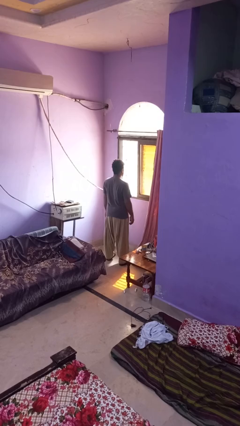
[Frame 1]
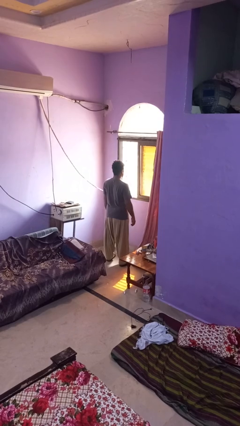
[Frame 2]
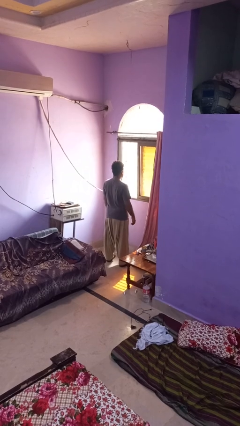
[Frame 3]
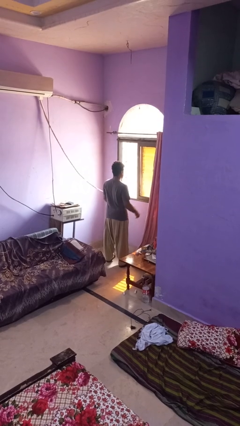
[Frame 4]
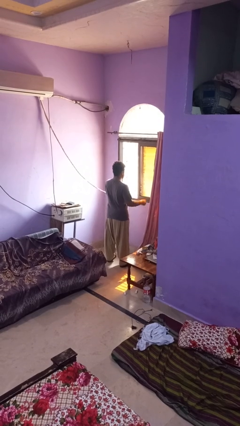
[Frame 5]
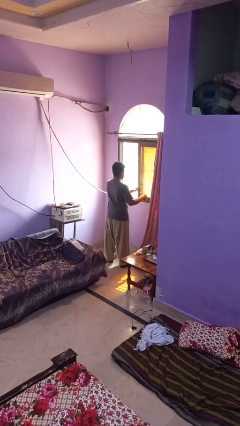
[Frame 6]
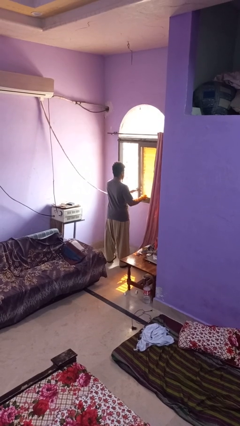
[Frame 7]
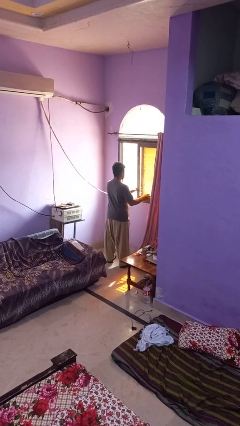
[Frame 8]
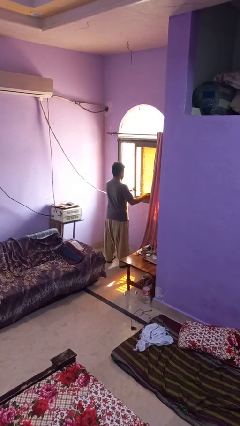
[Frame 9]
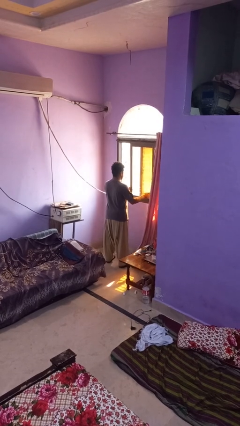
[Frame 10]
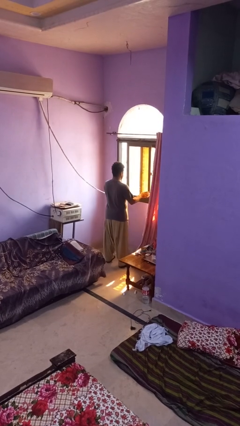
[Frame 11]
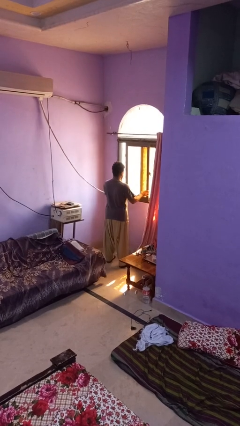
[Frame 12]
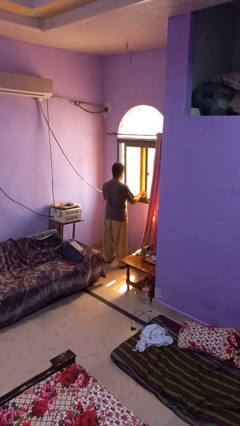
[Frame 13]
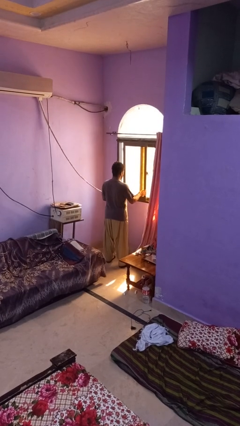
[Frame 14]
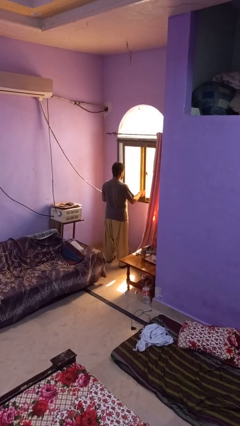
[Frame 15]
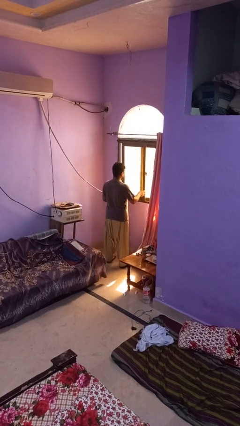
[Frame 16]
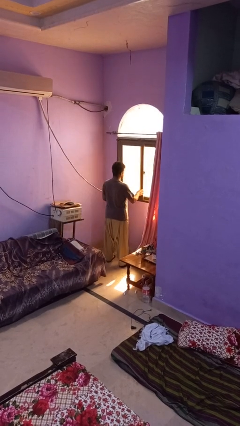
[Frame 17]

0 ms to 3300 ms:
person closes home window

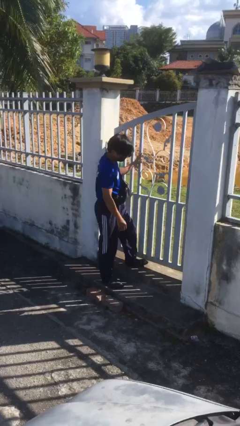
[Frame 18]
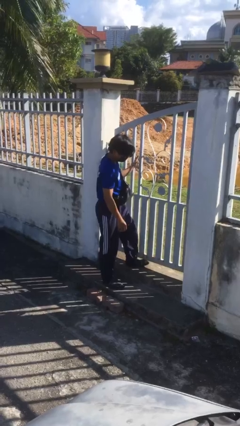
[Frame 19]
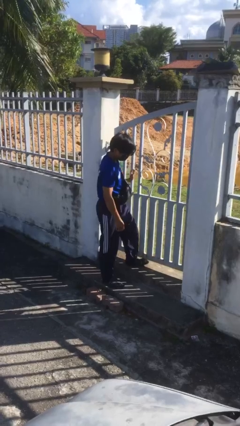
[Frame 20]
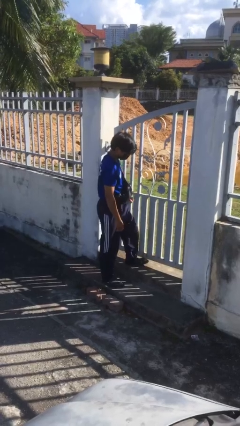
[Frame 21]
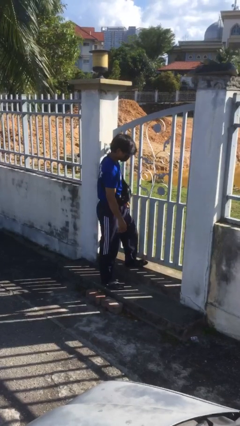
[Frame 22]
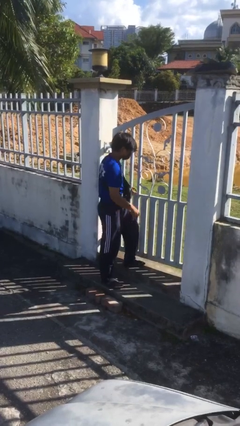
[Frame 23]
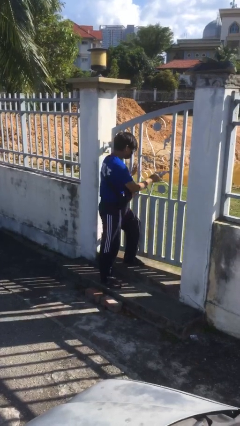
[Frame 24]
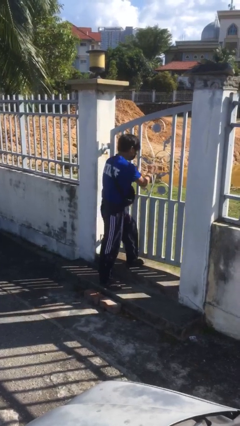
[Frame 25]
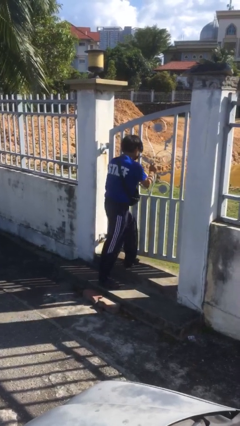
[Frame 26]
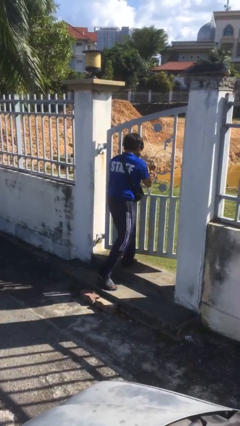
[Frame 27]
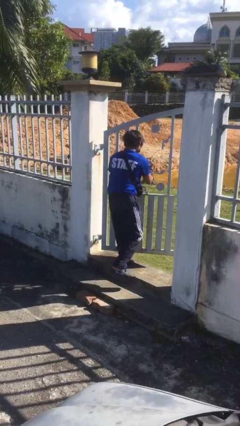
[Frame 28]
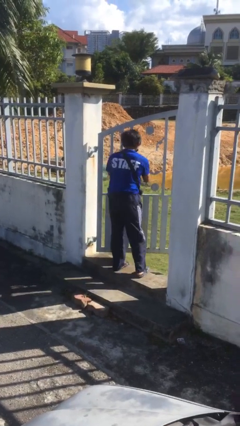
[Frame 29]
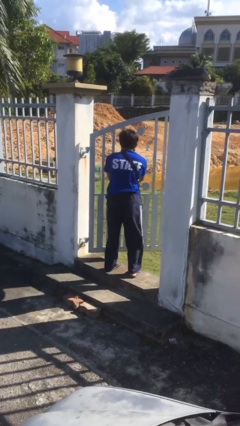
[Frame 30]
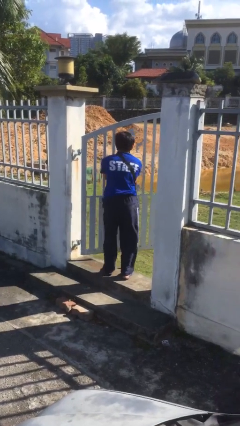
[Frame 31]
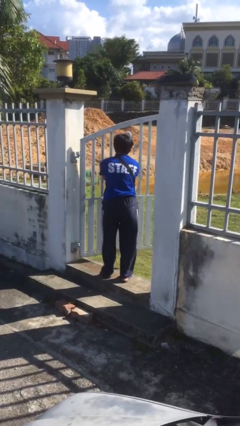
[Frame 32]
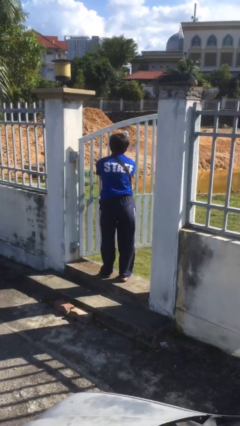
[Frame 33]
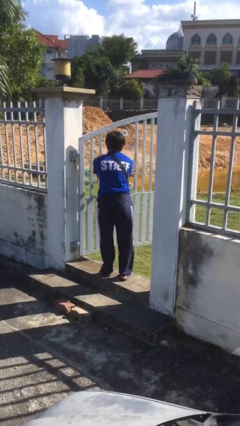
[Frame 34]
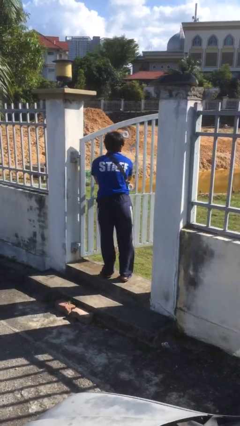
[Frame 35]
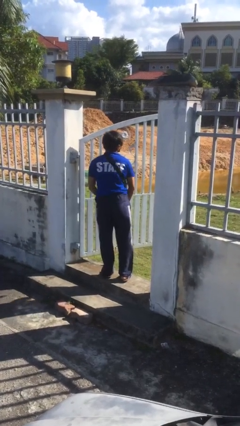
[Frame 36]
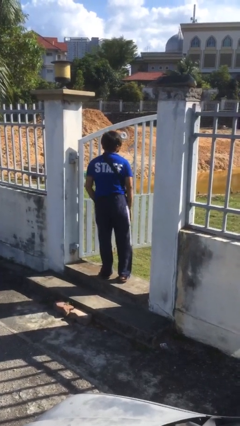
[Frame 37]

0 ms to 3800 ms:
person opens facility door

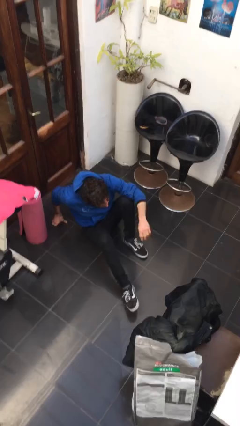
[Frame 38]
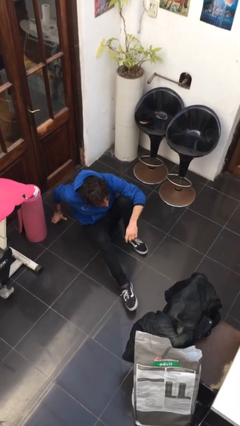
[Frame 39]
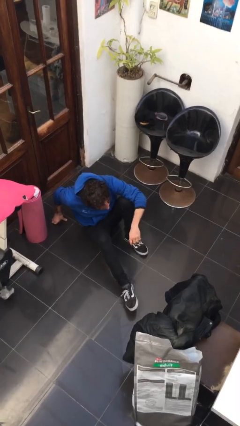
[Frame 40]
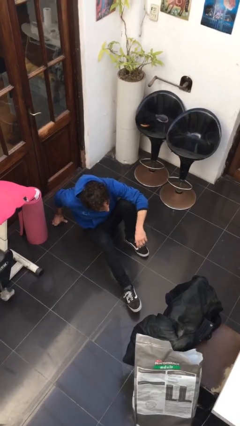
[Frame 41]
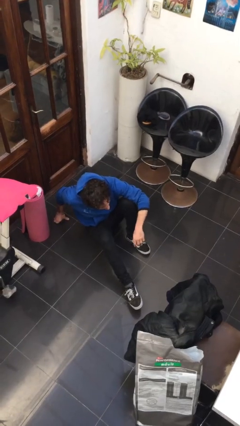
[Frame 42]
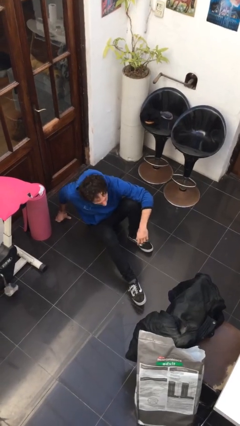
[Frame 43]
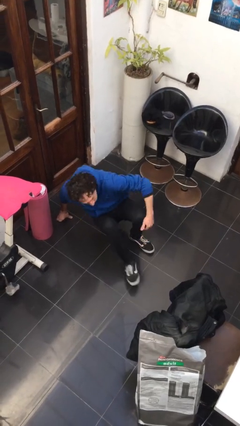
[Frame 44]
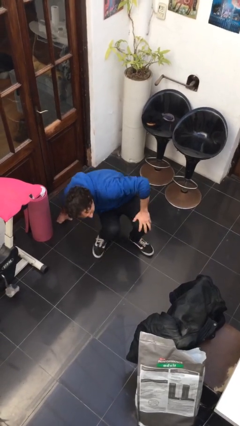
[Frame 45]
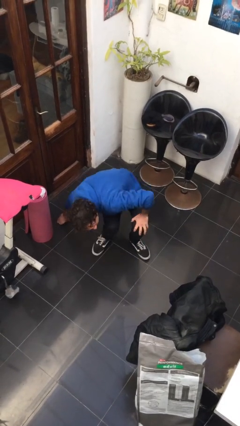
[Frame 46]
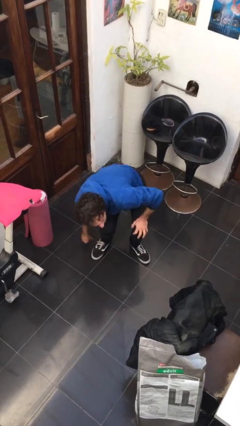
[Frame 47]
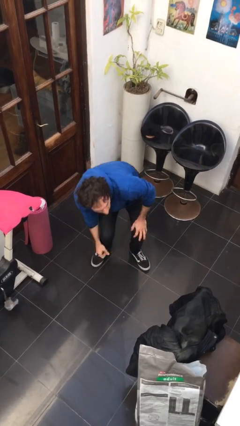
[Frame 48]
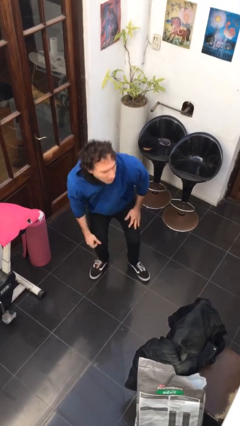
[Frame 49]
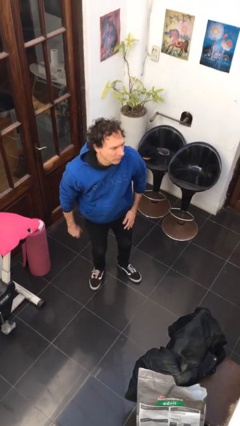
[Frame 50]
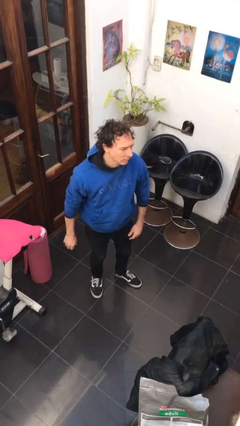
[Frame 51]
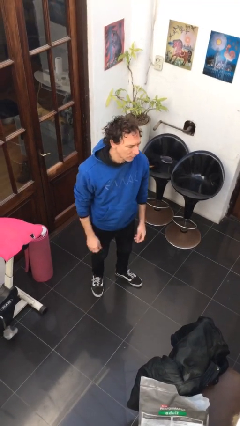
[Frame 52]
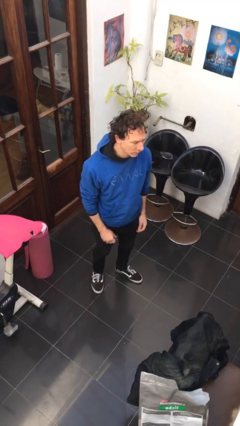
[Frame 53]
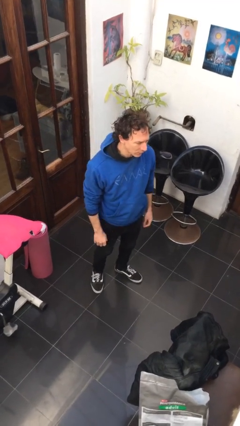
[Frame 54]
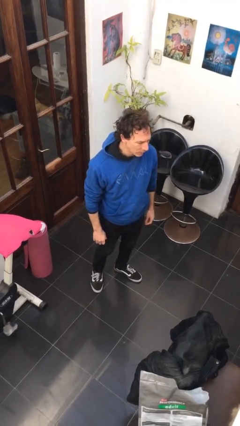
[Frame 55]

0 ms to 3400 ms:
person stands up from floor

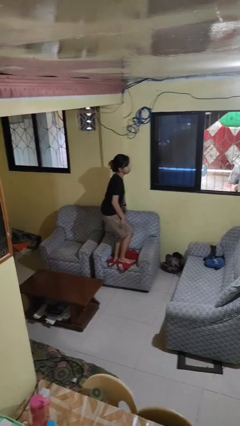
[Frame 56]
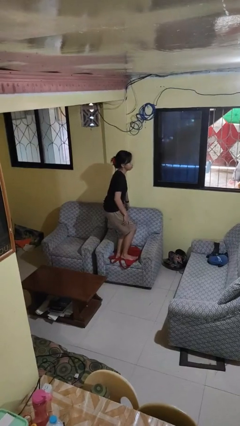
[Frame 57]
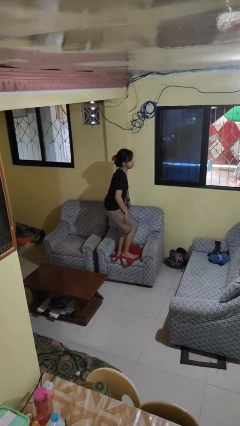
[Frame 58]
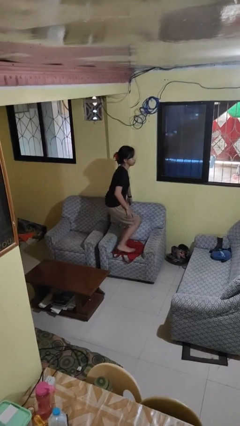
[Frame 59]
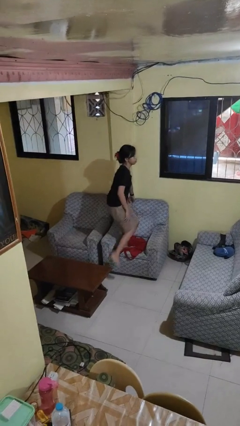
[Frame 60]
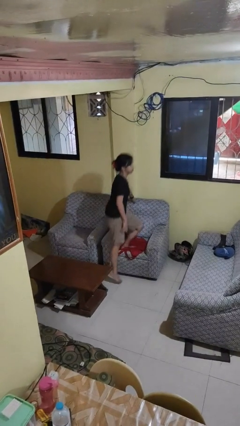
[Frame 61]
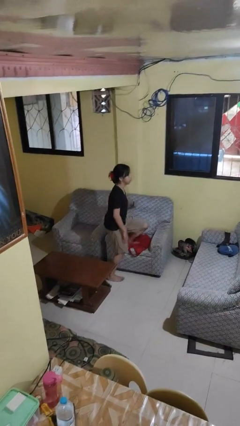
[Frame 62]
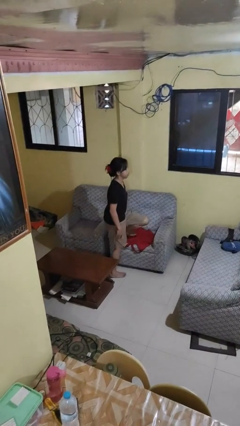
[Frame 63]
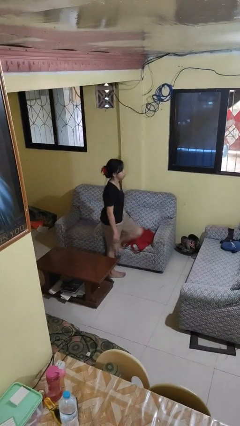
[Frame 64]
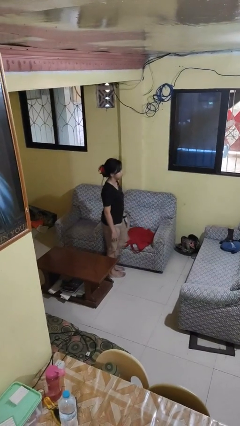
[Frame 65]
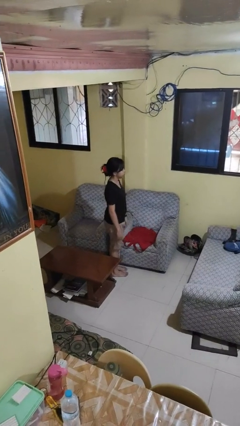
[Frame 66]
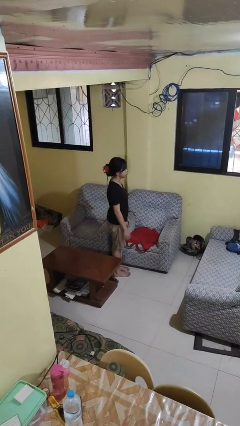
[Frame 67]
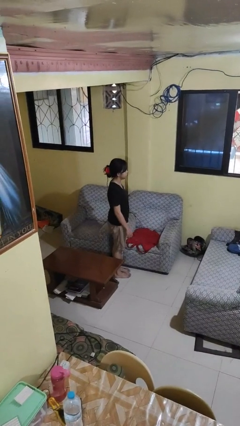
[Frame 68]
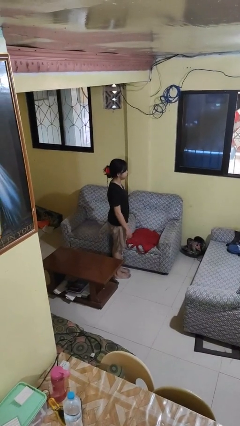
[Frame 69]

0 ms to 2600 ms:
person climbs off couch

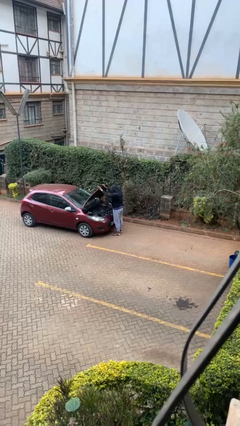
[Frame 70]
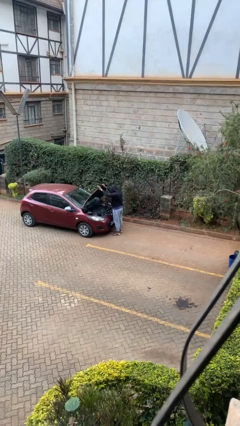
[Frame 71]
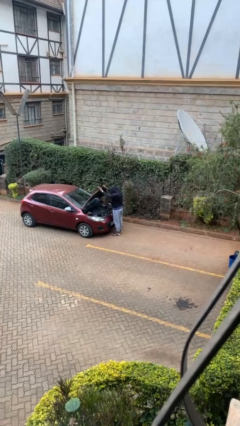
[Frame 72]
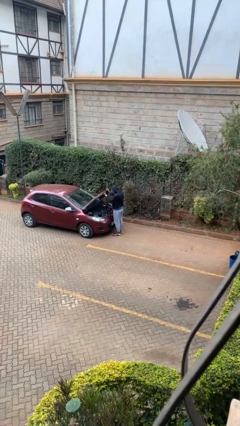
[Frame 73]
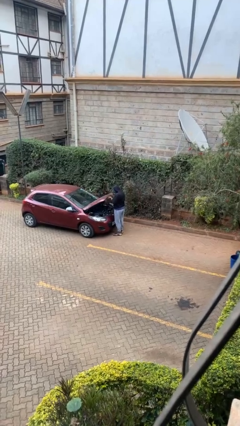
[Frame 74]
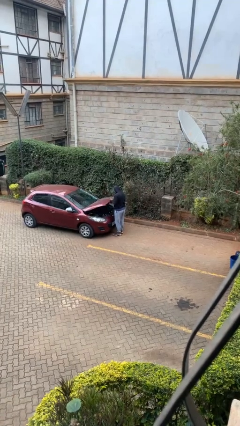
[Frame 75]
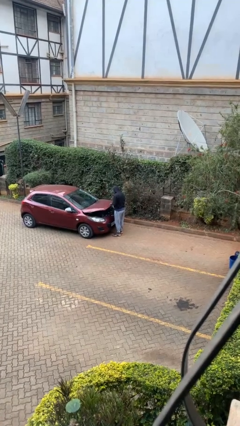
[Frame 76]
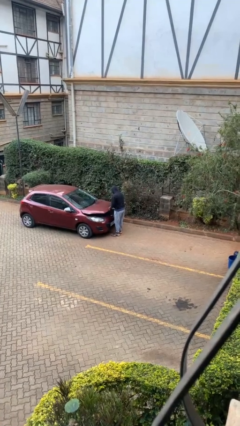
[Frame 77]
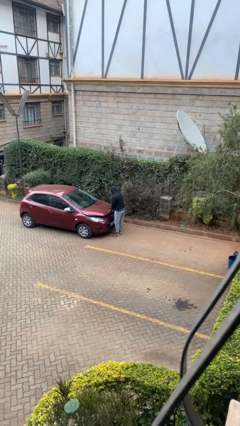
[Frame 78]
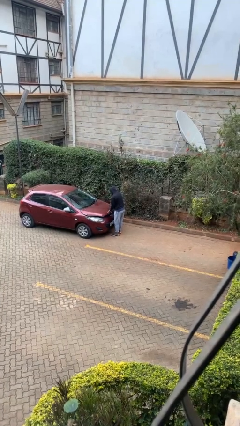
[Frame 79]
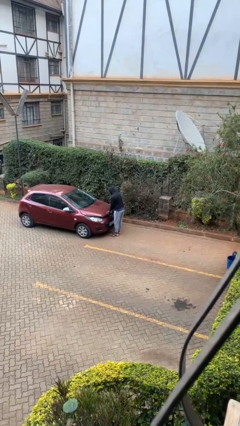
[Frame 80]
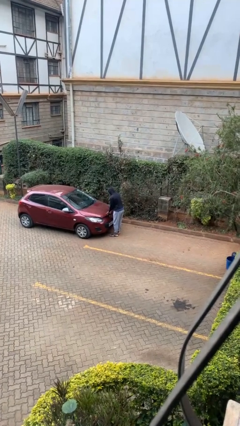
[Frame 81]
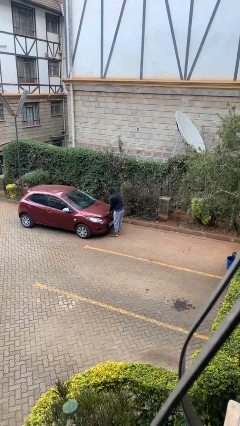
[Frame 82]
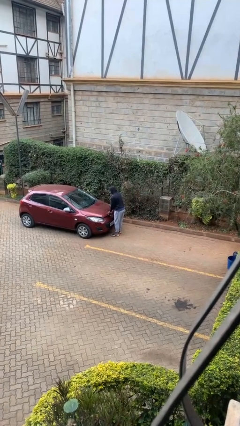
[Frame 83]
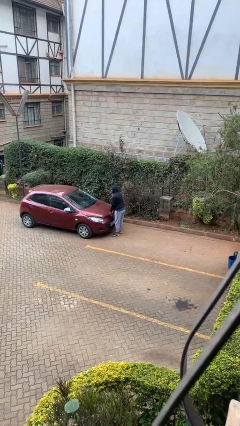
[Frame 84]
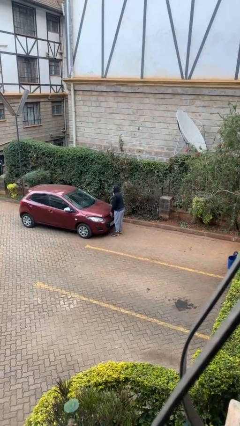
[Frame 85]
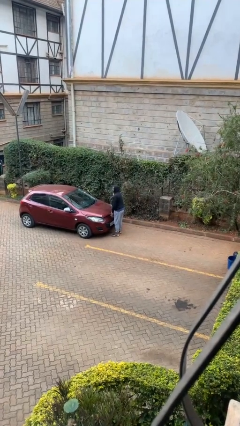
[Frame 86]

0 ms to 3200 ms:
person closes car hood

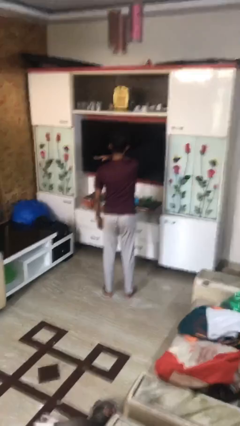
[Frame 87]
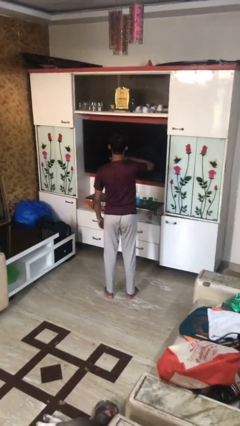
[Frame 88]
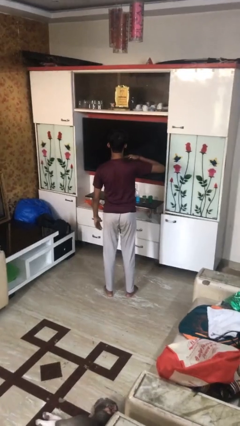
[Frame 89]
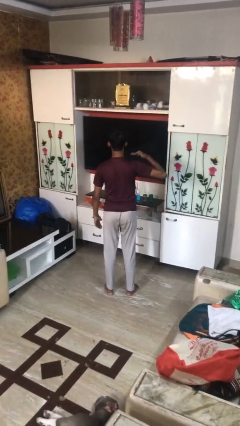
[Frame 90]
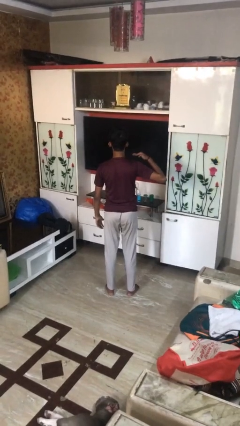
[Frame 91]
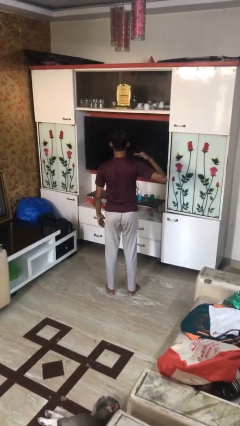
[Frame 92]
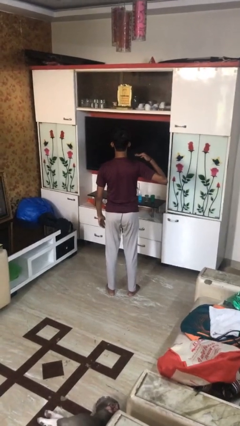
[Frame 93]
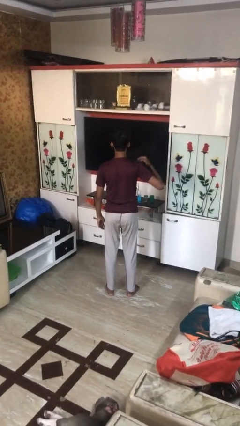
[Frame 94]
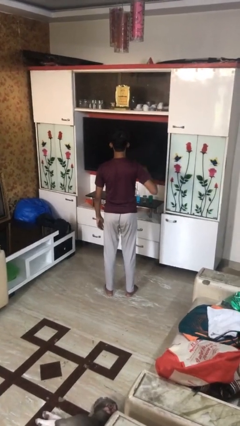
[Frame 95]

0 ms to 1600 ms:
person gestures cut
